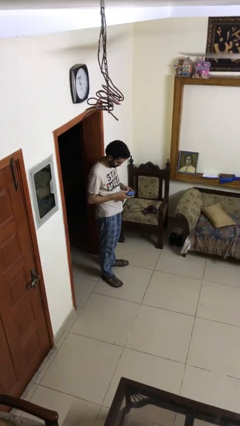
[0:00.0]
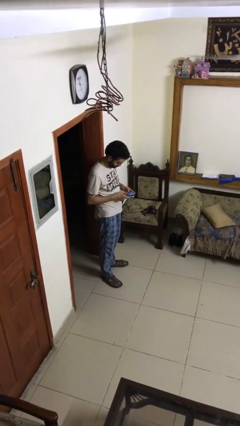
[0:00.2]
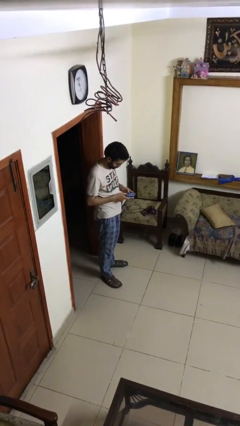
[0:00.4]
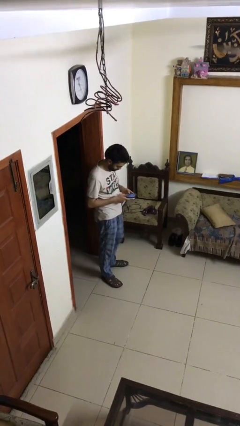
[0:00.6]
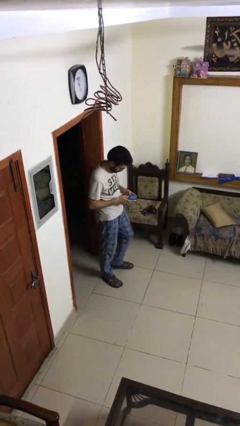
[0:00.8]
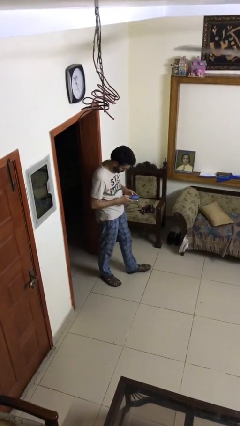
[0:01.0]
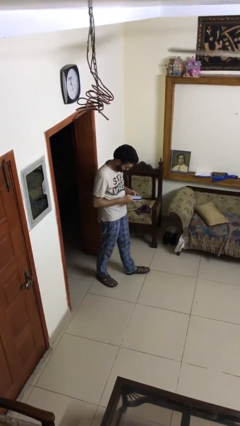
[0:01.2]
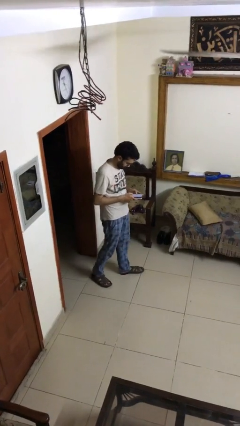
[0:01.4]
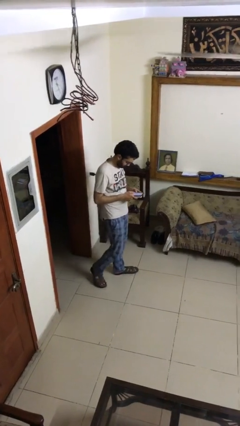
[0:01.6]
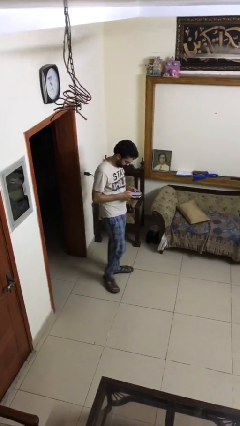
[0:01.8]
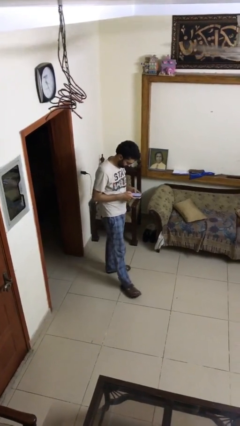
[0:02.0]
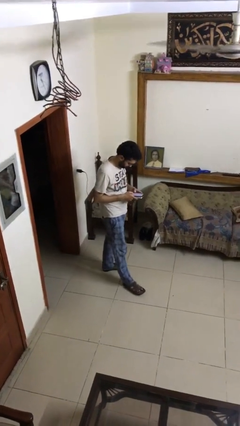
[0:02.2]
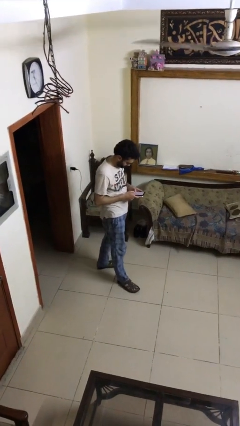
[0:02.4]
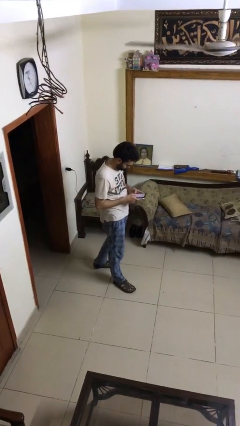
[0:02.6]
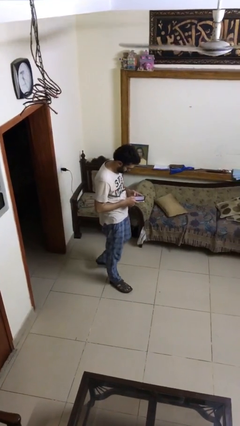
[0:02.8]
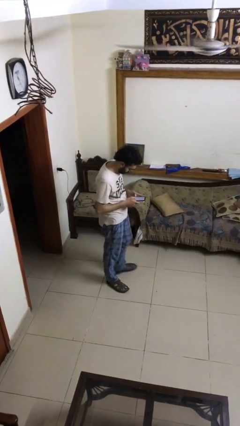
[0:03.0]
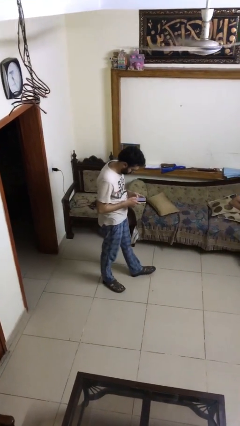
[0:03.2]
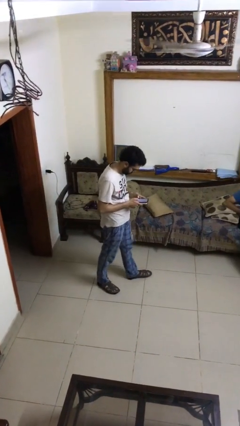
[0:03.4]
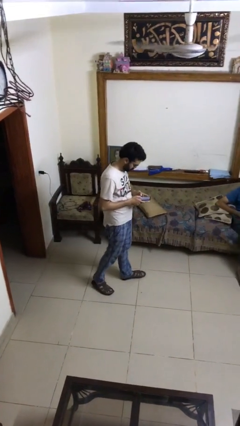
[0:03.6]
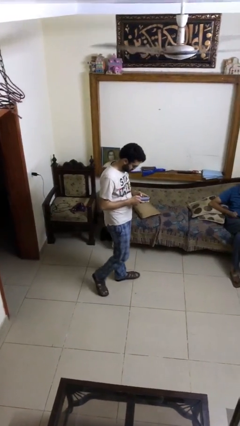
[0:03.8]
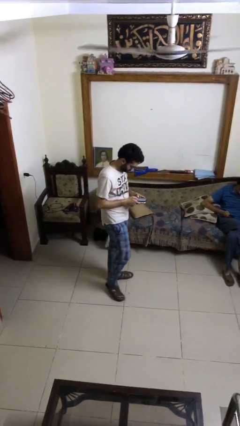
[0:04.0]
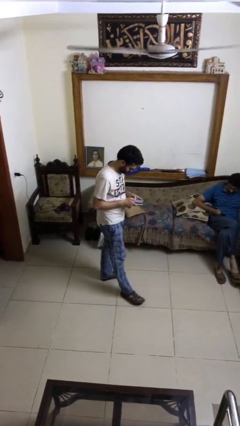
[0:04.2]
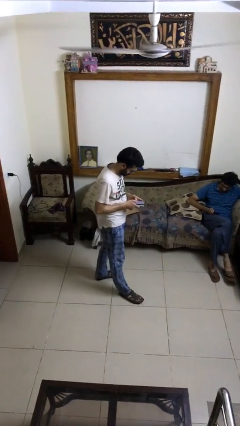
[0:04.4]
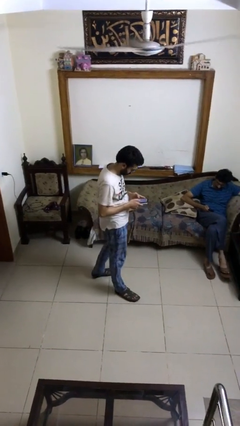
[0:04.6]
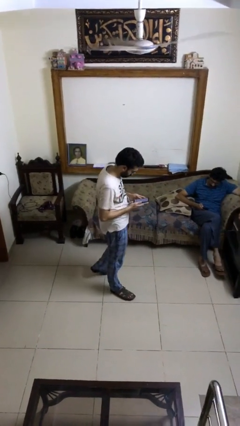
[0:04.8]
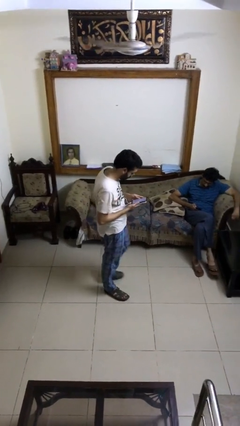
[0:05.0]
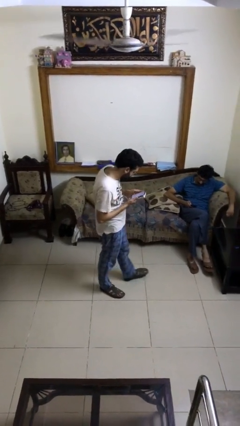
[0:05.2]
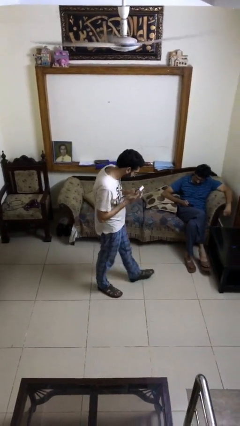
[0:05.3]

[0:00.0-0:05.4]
person texts on phone

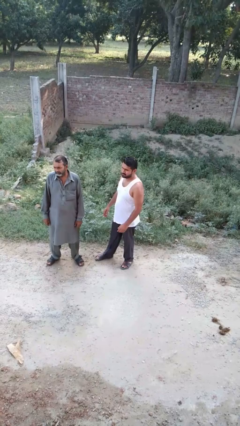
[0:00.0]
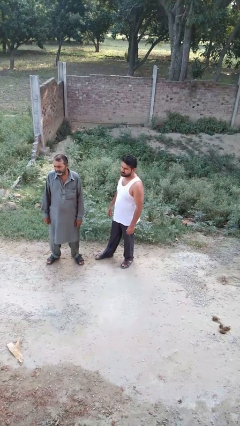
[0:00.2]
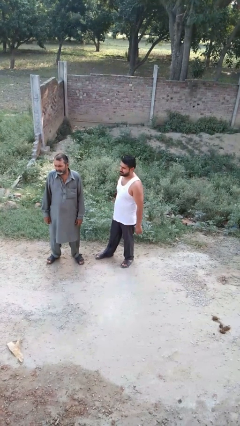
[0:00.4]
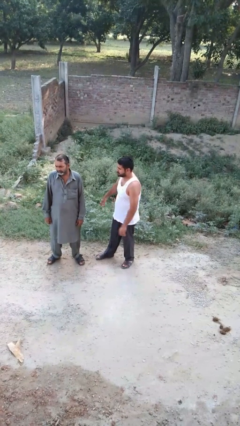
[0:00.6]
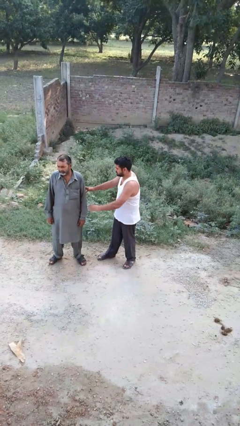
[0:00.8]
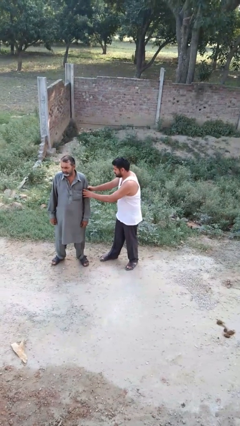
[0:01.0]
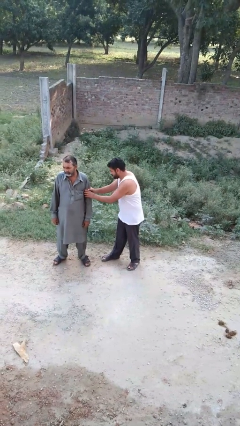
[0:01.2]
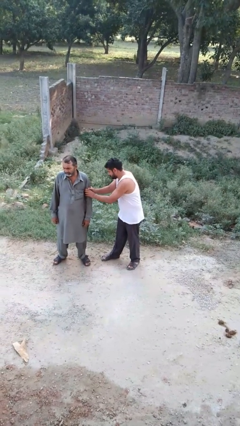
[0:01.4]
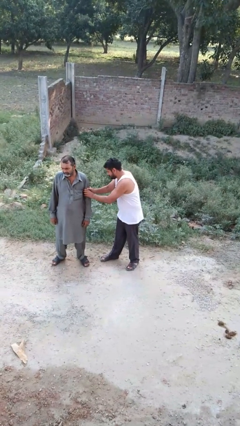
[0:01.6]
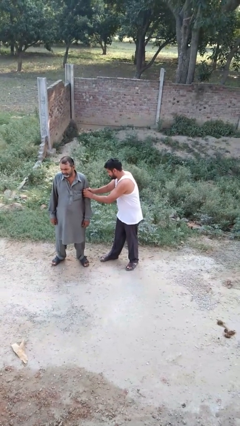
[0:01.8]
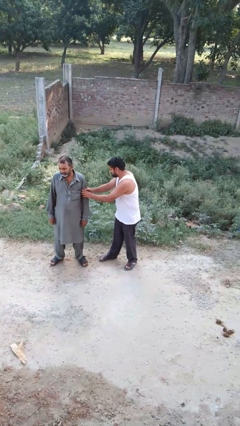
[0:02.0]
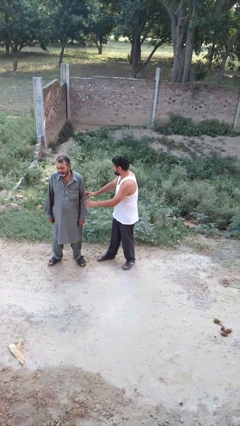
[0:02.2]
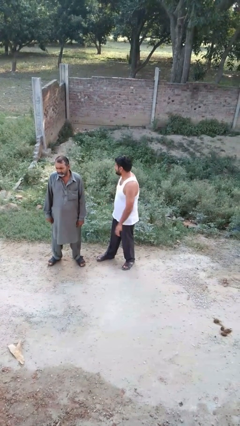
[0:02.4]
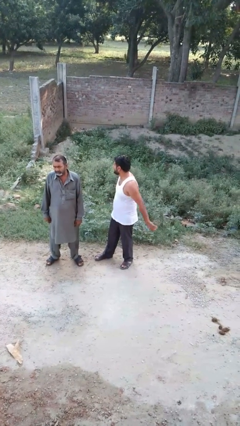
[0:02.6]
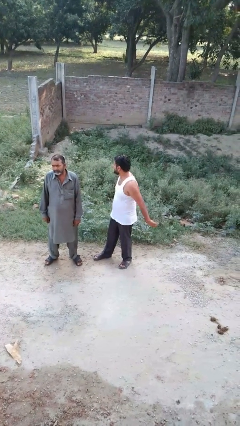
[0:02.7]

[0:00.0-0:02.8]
person grabs person by forearm

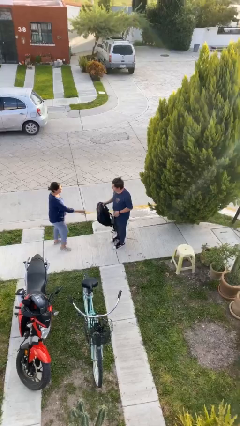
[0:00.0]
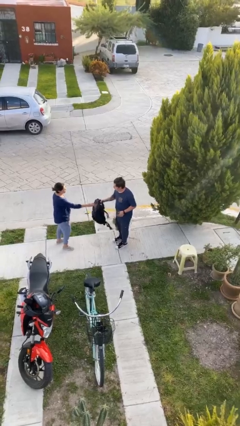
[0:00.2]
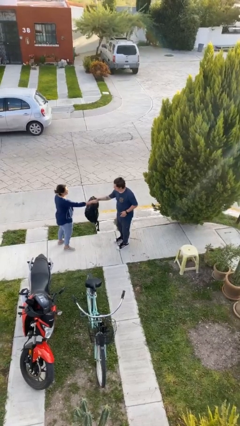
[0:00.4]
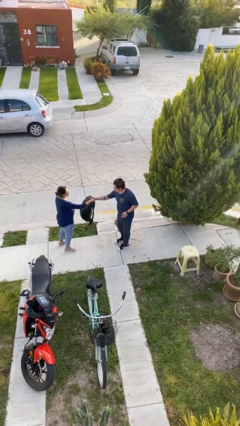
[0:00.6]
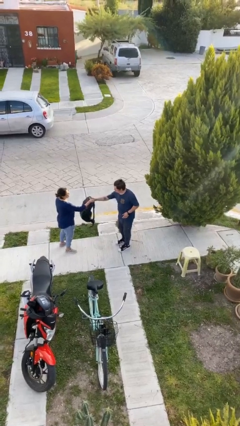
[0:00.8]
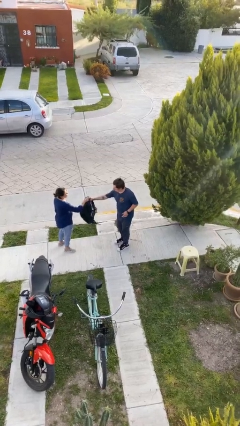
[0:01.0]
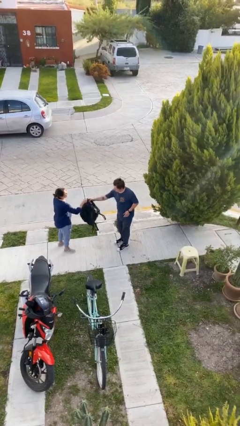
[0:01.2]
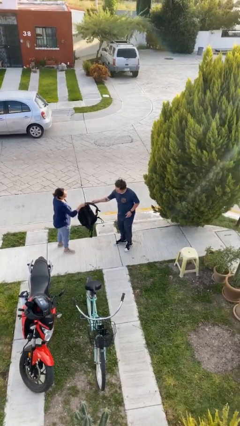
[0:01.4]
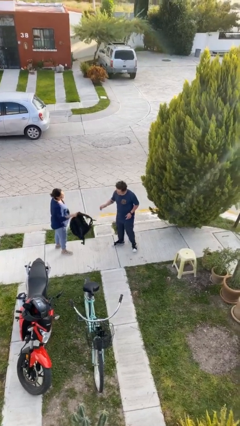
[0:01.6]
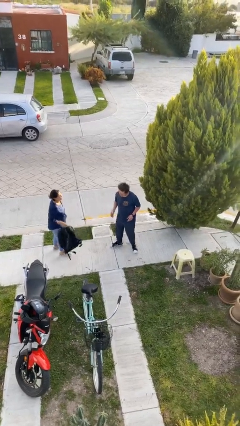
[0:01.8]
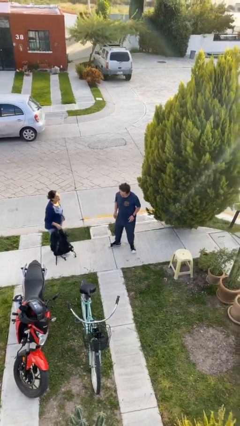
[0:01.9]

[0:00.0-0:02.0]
person transfers object to person

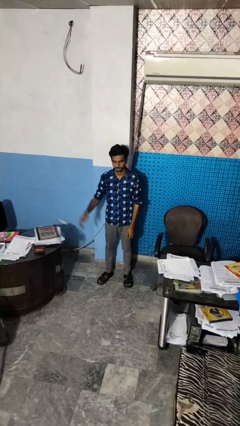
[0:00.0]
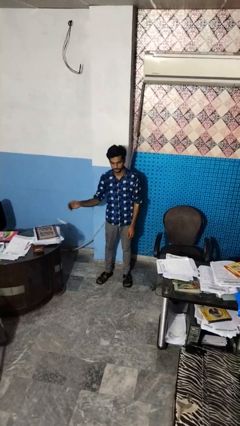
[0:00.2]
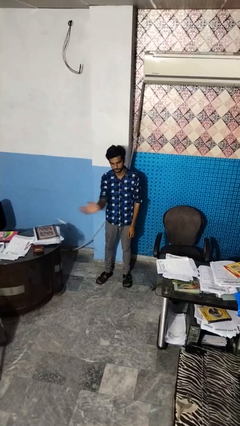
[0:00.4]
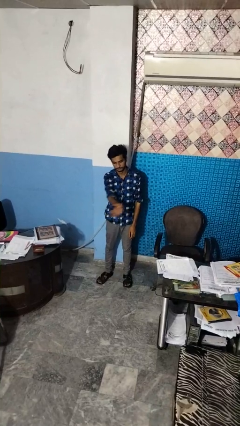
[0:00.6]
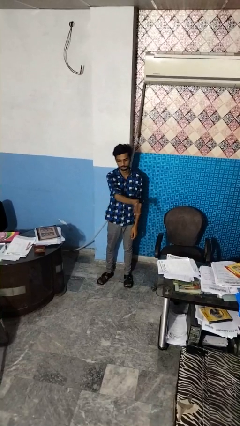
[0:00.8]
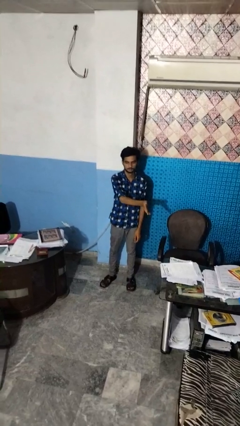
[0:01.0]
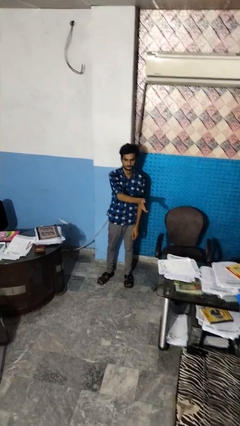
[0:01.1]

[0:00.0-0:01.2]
person gestures swipe left

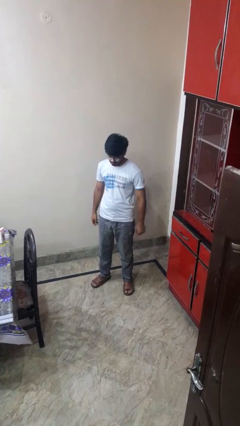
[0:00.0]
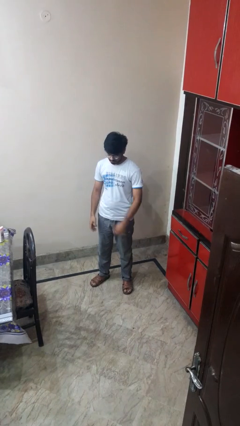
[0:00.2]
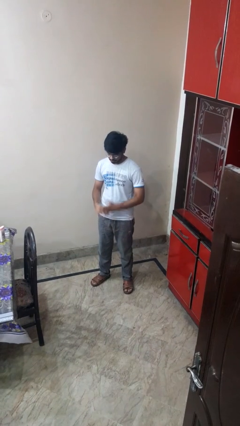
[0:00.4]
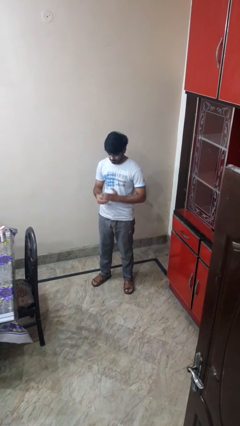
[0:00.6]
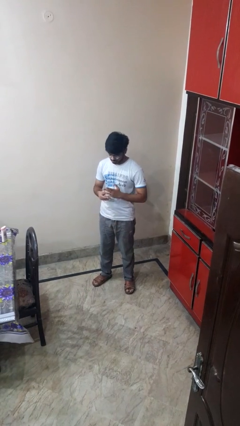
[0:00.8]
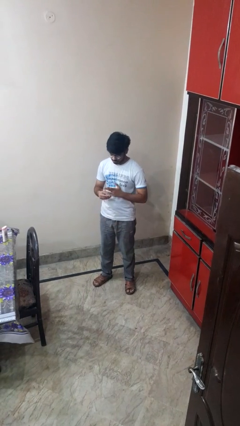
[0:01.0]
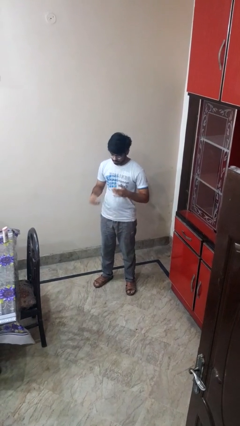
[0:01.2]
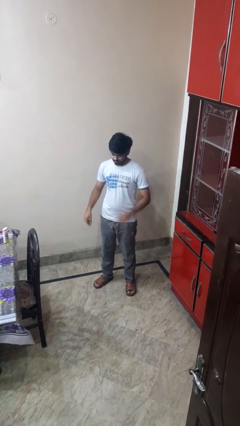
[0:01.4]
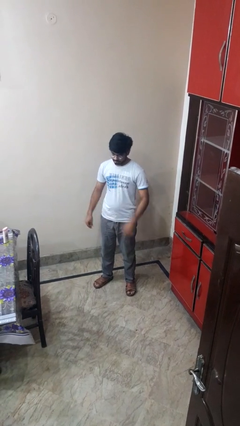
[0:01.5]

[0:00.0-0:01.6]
person takes off ring

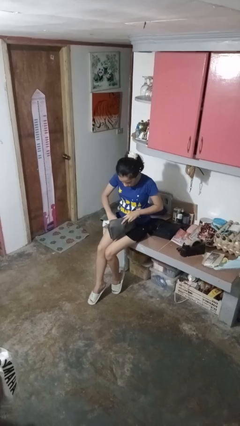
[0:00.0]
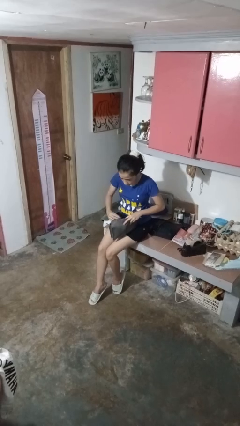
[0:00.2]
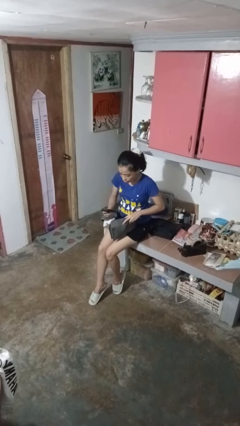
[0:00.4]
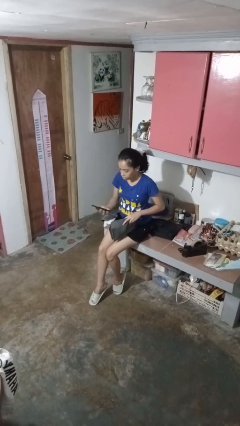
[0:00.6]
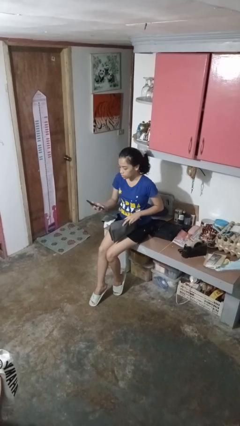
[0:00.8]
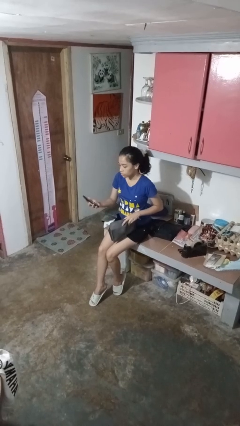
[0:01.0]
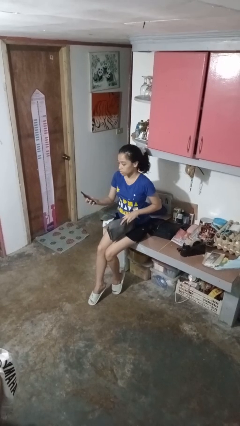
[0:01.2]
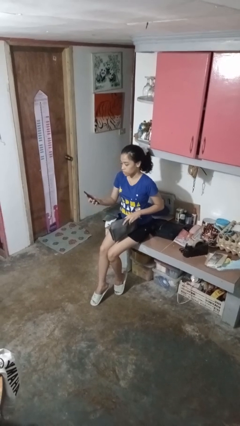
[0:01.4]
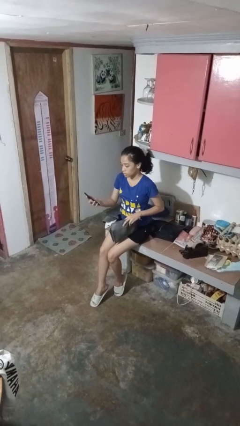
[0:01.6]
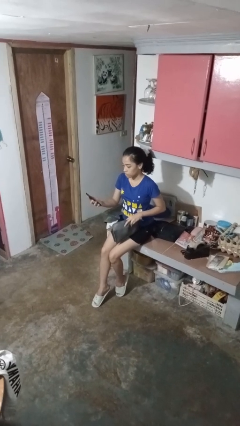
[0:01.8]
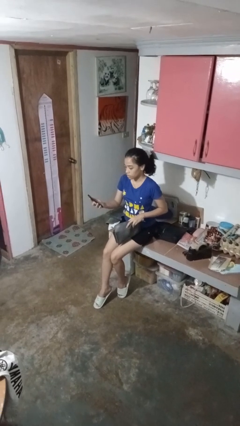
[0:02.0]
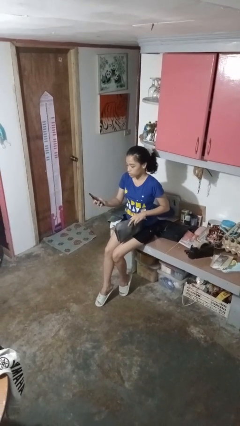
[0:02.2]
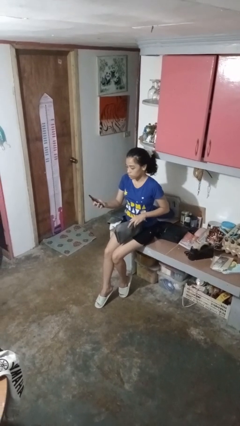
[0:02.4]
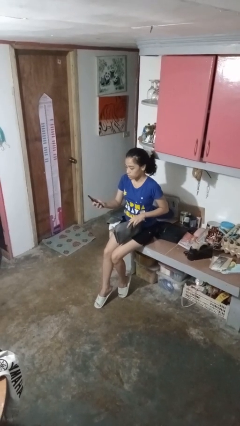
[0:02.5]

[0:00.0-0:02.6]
person takes object from purse

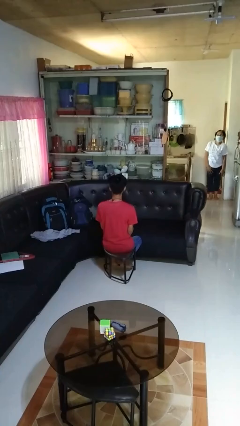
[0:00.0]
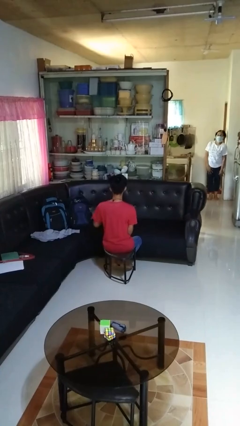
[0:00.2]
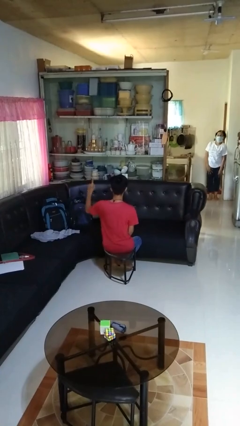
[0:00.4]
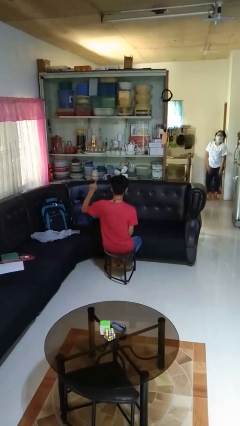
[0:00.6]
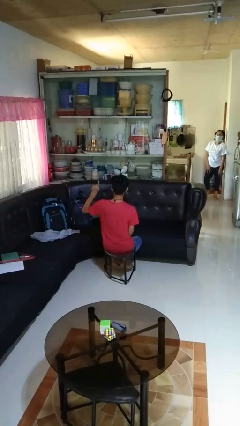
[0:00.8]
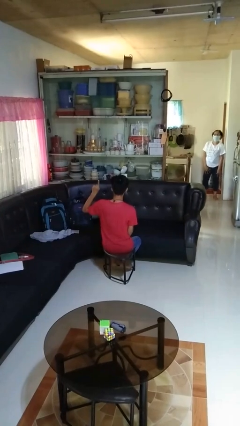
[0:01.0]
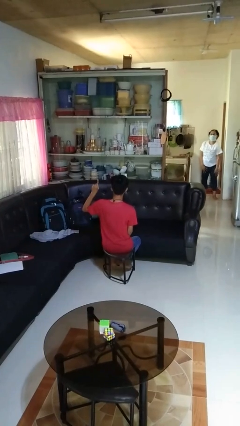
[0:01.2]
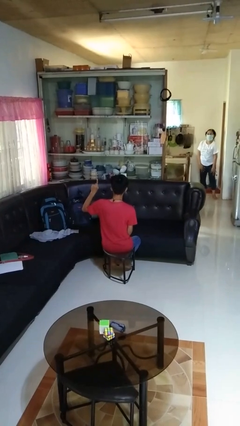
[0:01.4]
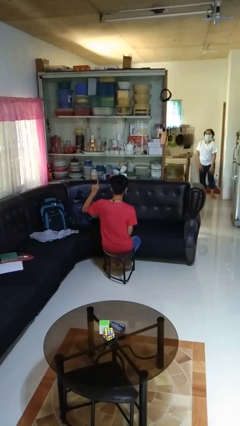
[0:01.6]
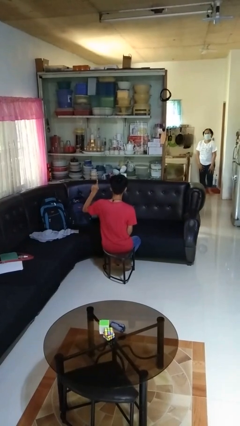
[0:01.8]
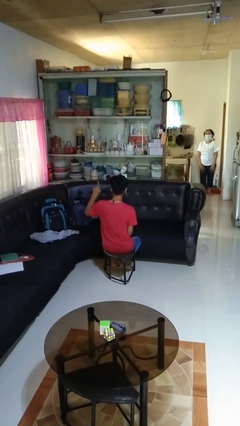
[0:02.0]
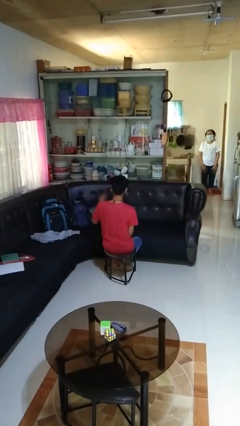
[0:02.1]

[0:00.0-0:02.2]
person gestures number one
